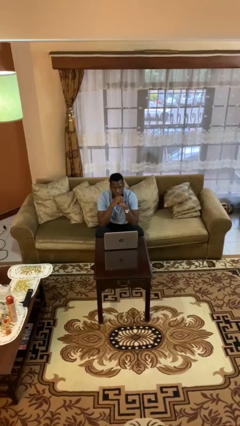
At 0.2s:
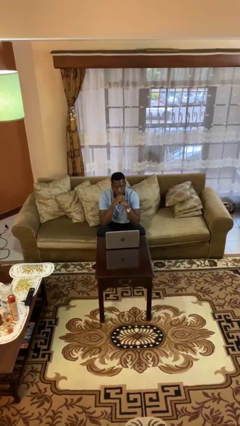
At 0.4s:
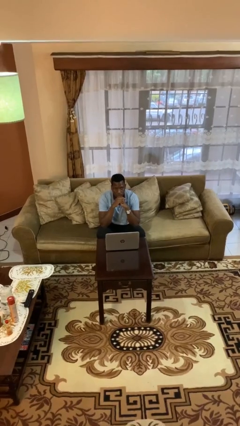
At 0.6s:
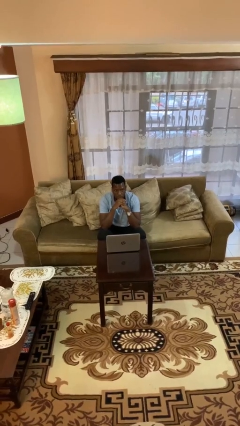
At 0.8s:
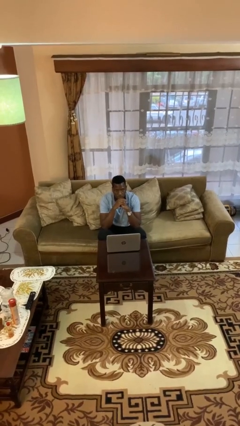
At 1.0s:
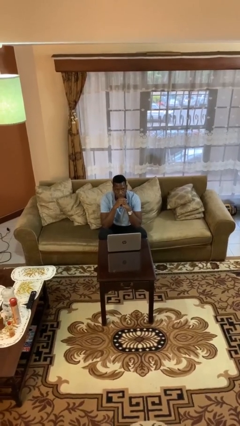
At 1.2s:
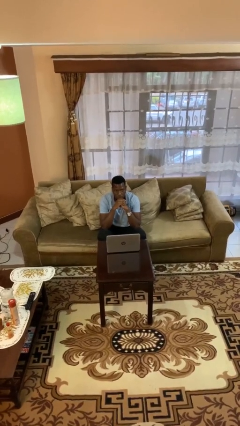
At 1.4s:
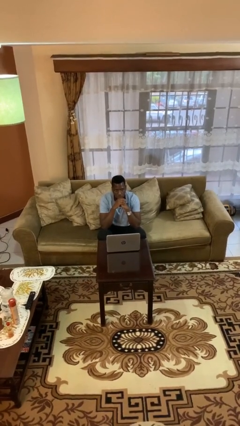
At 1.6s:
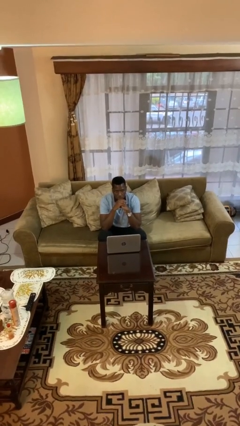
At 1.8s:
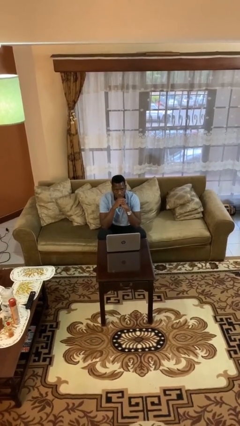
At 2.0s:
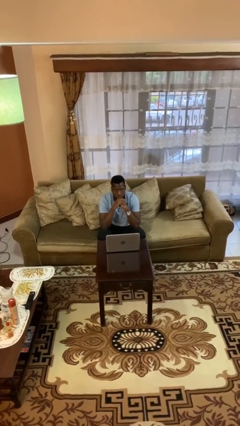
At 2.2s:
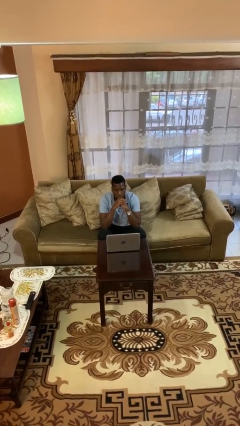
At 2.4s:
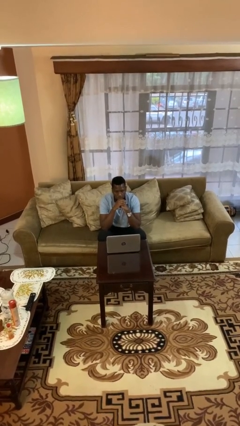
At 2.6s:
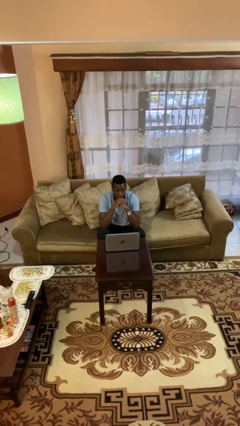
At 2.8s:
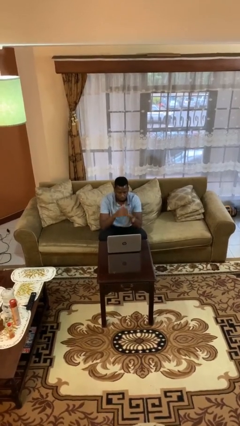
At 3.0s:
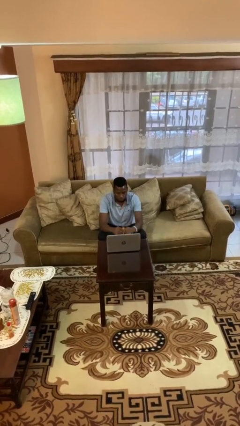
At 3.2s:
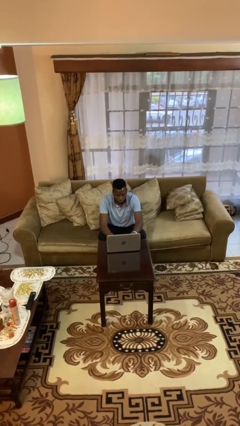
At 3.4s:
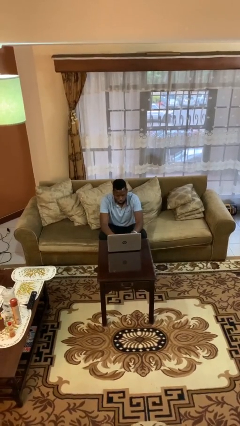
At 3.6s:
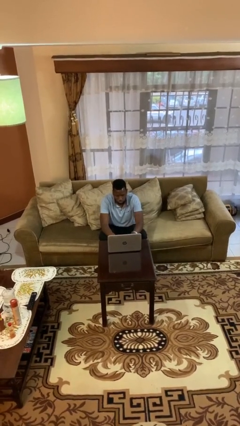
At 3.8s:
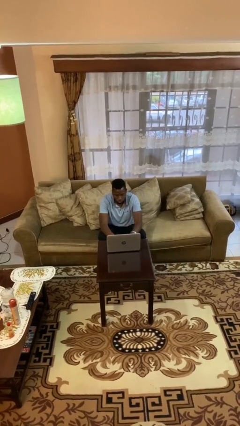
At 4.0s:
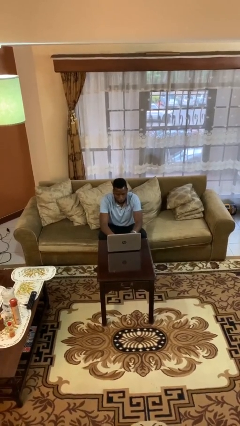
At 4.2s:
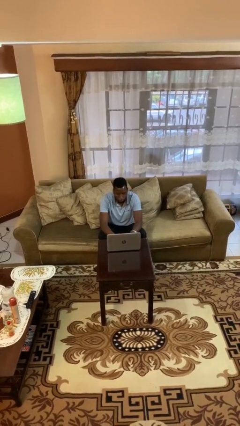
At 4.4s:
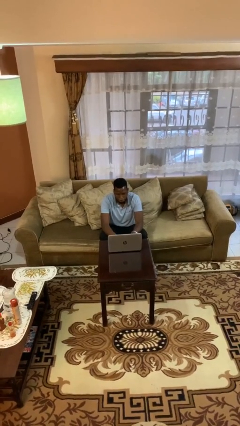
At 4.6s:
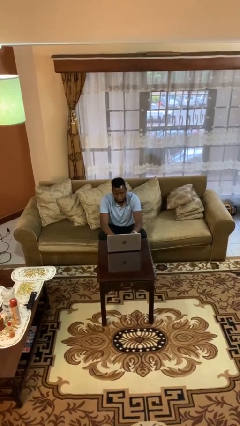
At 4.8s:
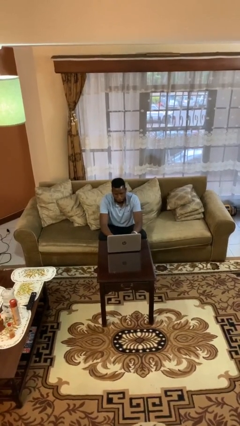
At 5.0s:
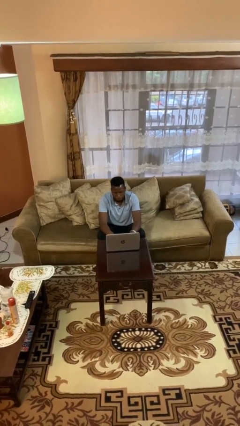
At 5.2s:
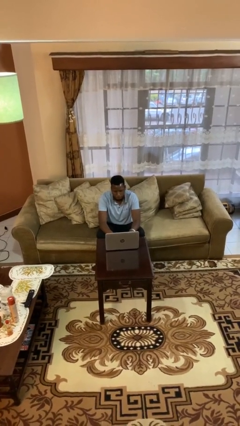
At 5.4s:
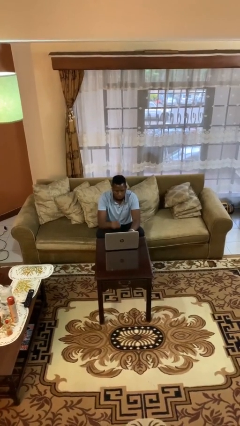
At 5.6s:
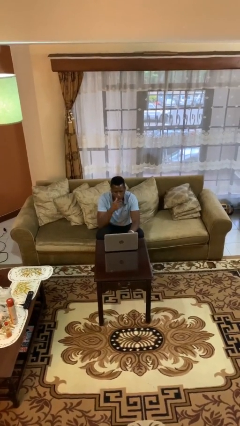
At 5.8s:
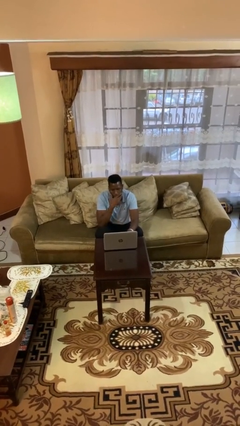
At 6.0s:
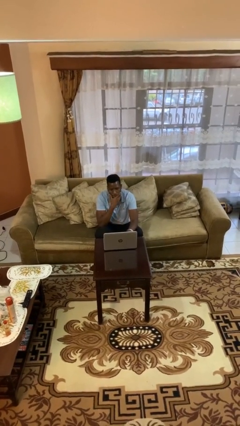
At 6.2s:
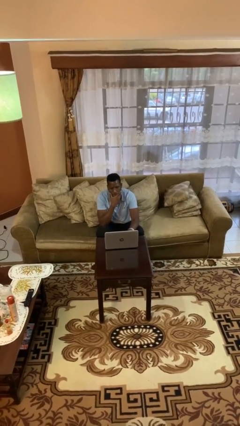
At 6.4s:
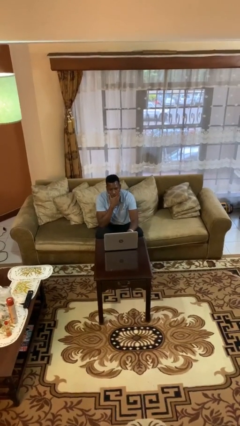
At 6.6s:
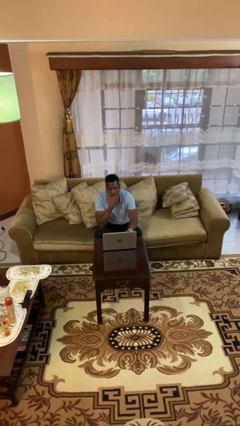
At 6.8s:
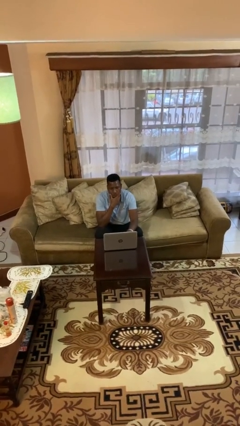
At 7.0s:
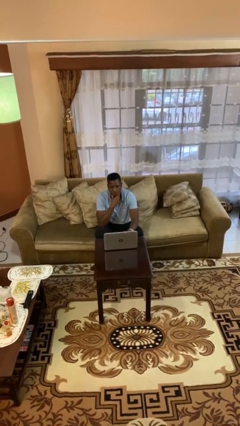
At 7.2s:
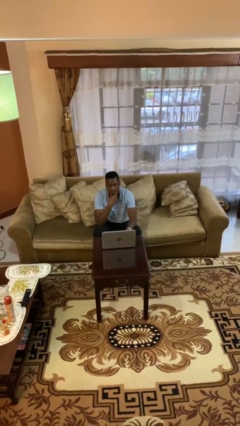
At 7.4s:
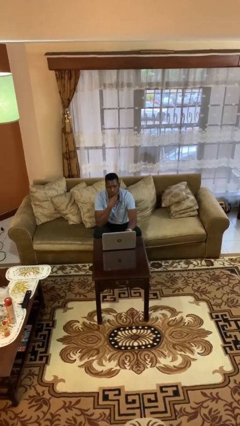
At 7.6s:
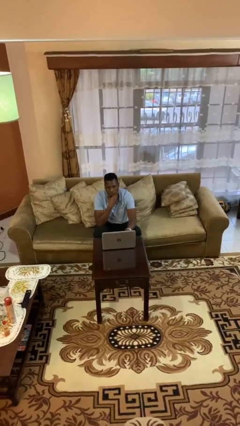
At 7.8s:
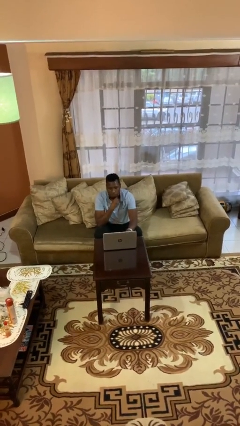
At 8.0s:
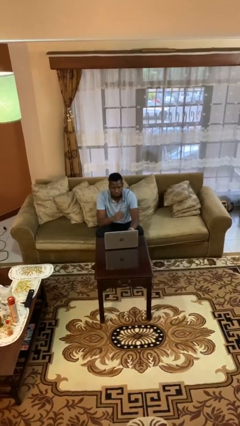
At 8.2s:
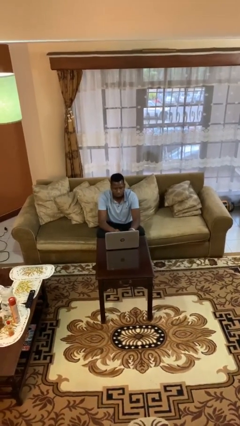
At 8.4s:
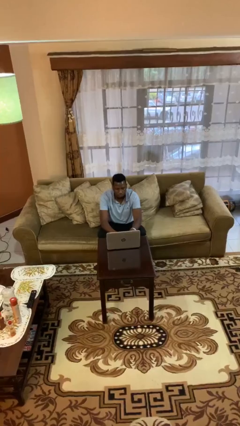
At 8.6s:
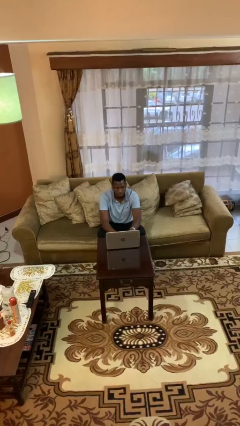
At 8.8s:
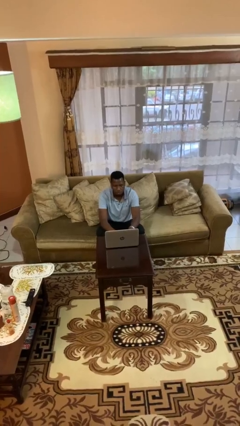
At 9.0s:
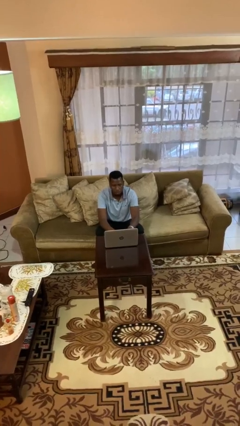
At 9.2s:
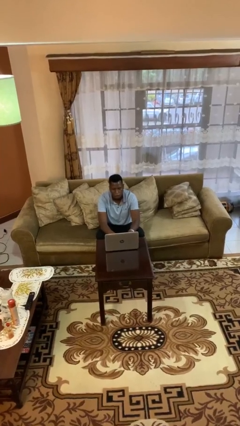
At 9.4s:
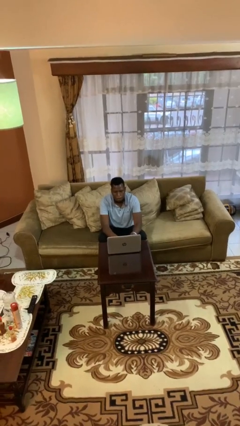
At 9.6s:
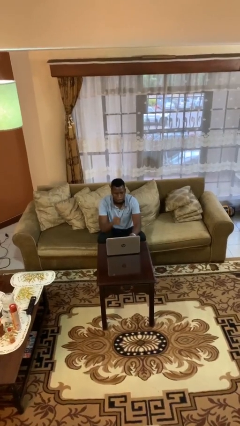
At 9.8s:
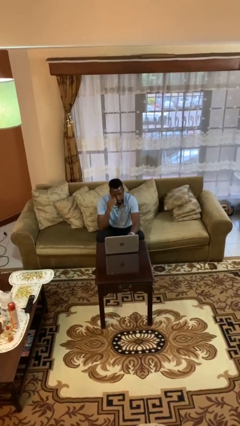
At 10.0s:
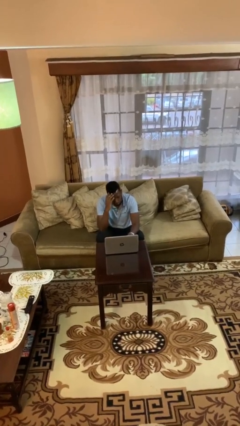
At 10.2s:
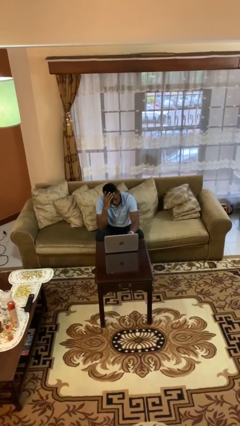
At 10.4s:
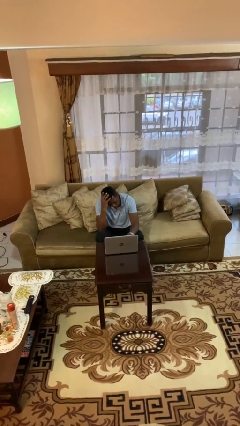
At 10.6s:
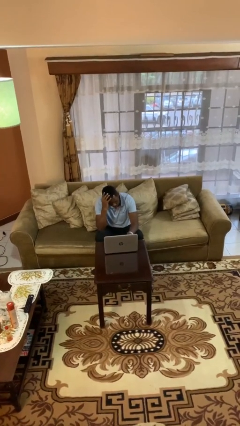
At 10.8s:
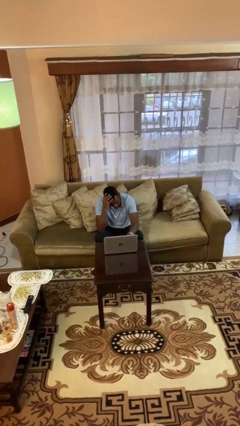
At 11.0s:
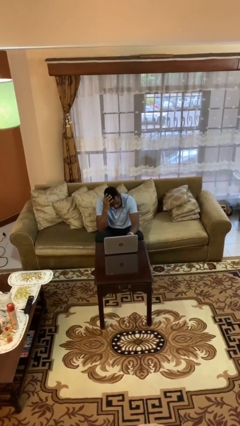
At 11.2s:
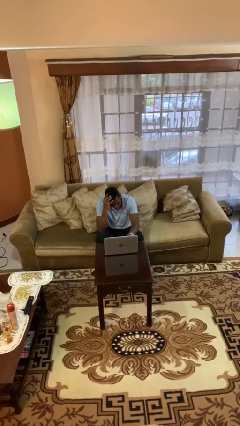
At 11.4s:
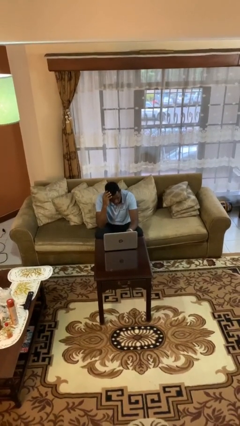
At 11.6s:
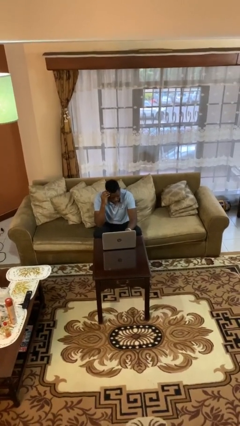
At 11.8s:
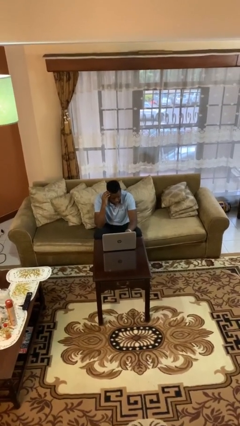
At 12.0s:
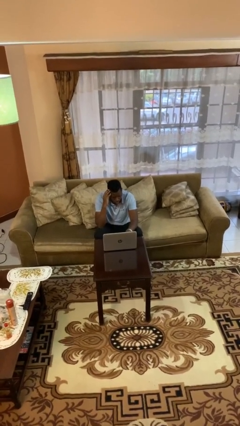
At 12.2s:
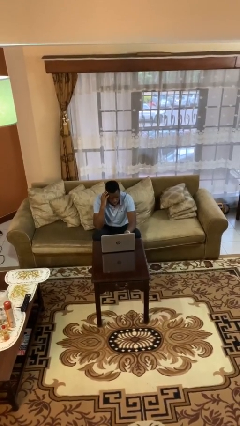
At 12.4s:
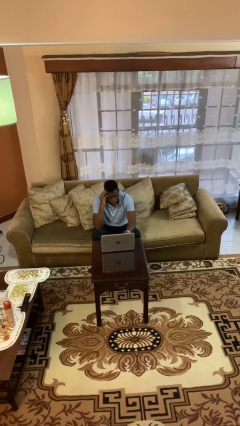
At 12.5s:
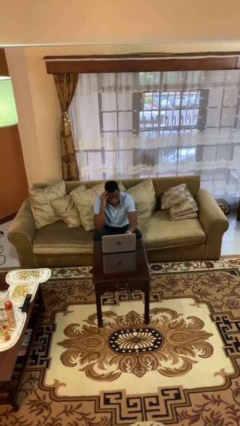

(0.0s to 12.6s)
person interacts with laptop

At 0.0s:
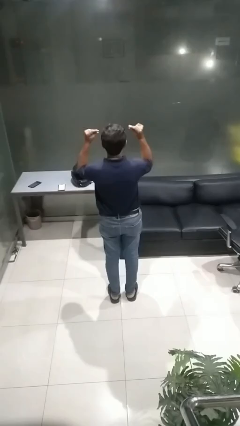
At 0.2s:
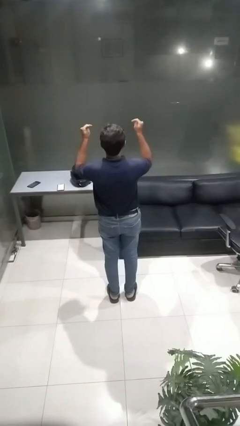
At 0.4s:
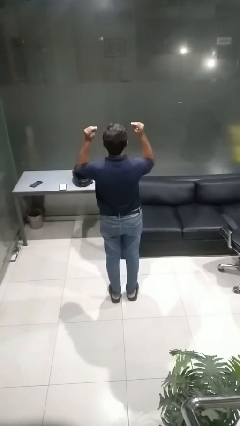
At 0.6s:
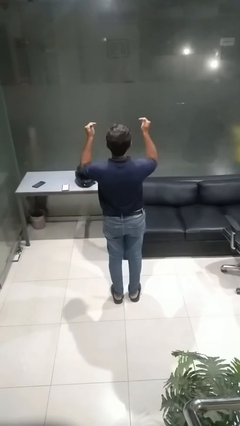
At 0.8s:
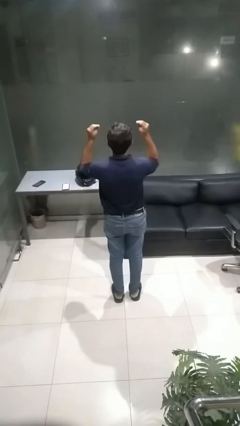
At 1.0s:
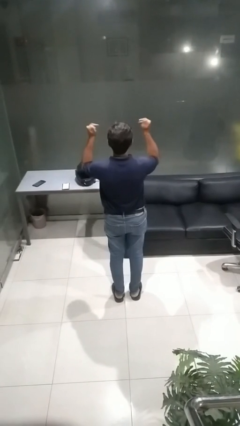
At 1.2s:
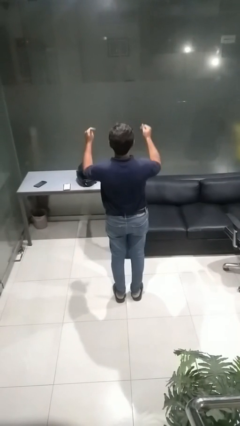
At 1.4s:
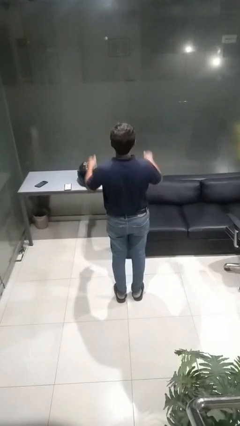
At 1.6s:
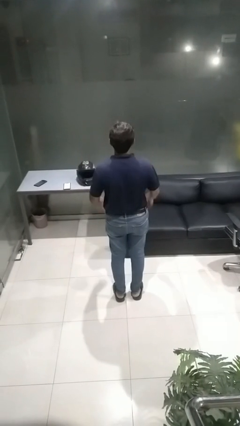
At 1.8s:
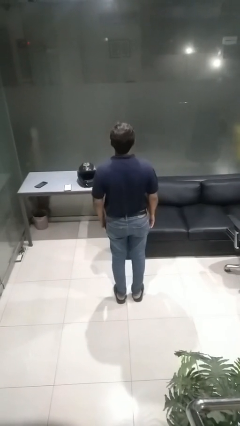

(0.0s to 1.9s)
person snaps fingers

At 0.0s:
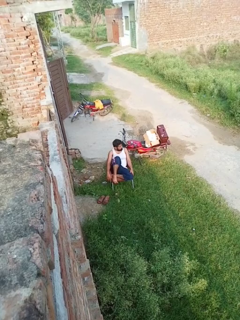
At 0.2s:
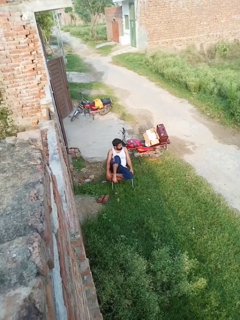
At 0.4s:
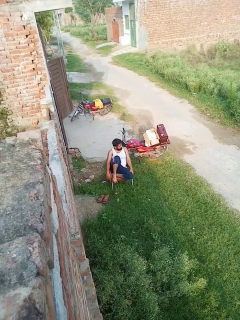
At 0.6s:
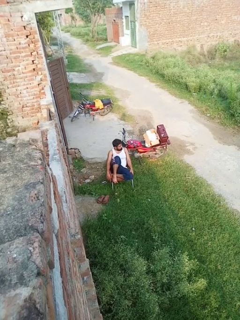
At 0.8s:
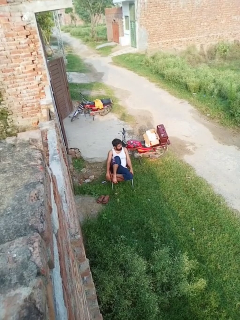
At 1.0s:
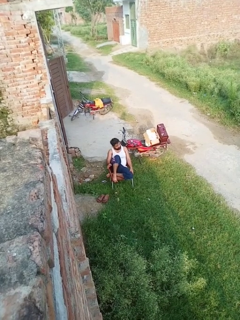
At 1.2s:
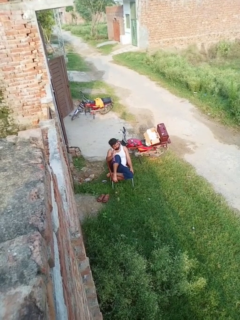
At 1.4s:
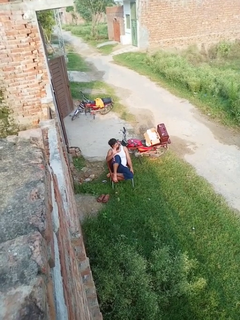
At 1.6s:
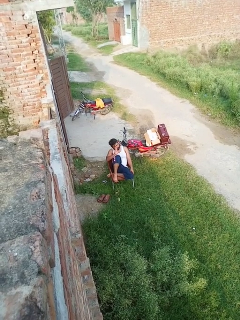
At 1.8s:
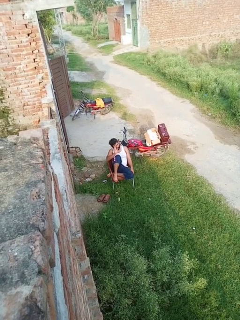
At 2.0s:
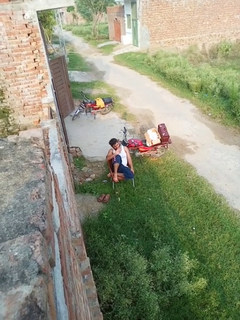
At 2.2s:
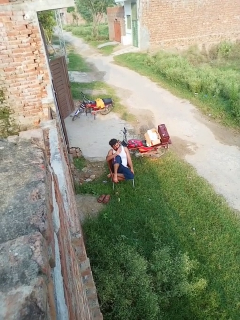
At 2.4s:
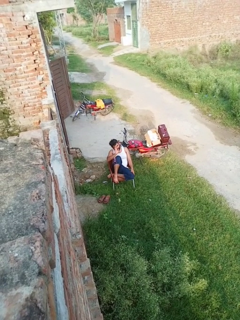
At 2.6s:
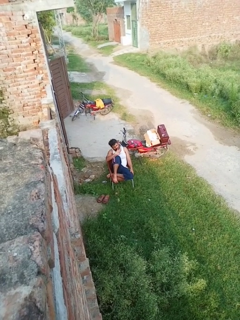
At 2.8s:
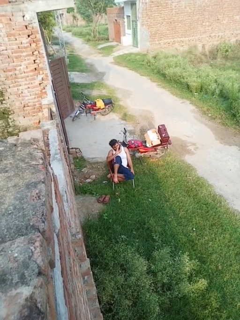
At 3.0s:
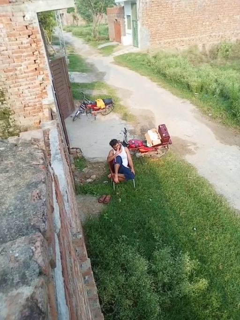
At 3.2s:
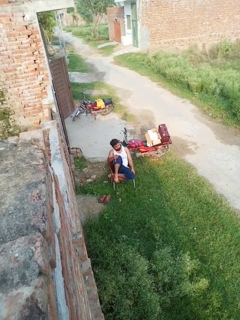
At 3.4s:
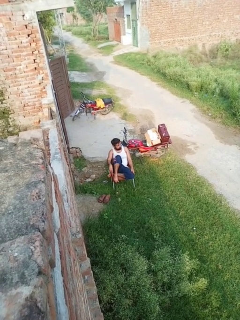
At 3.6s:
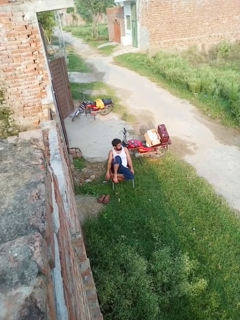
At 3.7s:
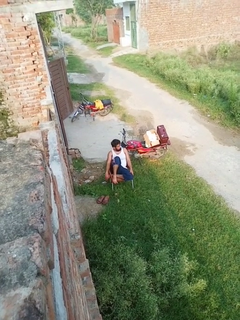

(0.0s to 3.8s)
person waves at person

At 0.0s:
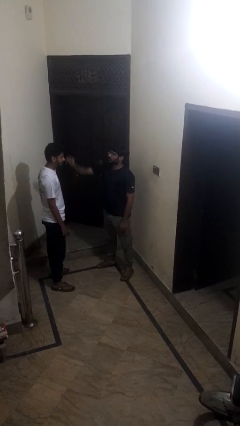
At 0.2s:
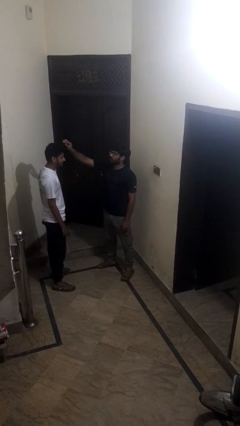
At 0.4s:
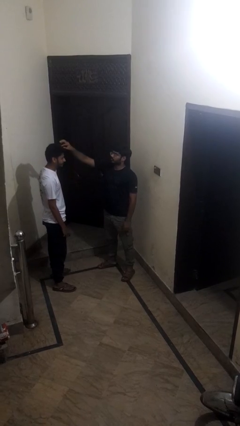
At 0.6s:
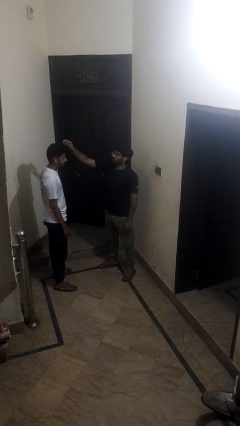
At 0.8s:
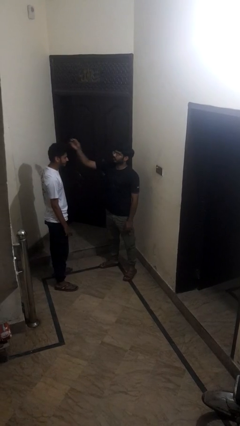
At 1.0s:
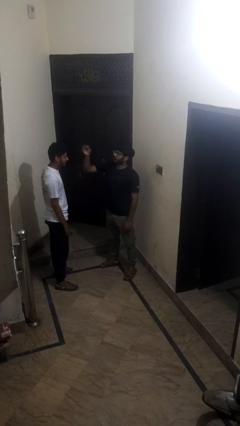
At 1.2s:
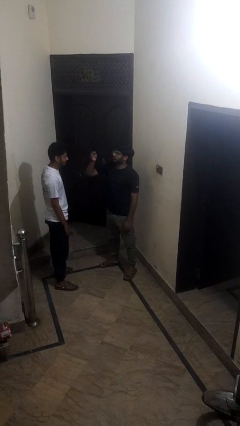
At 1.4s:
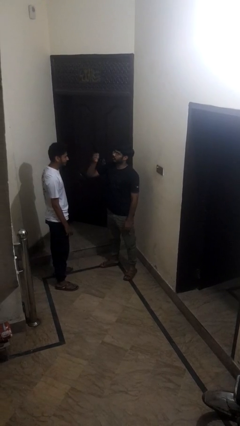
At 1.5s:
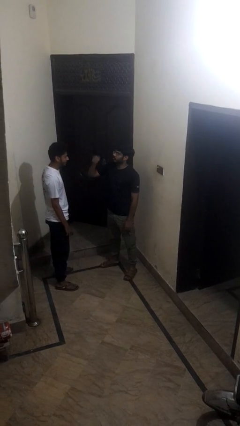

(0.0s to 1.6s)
person grabs person by hair
